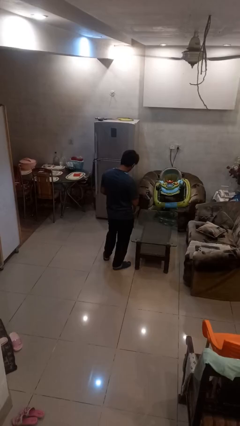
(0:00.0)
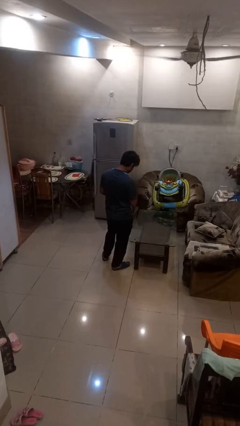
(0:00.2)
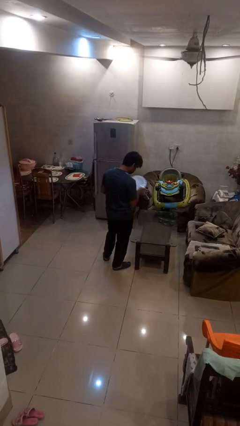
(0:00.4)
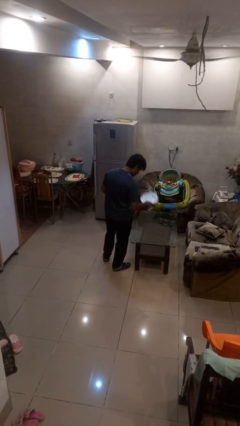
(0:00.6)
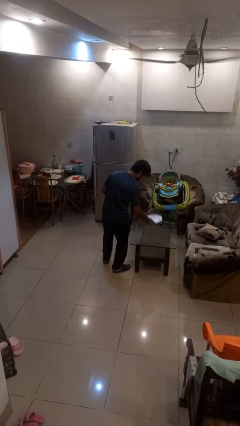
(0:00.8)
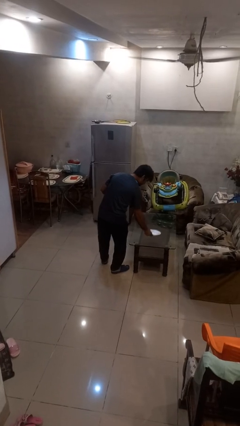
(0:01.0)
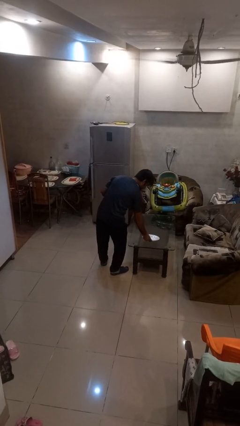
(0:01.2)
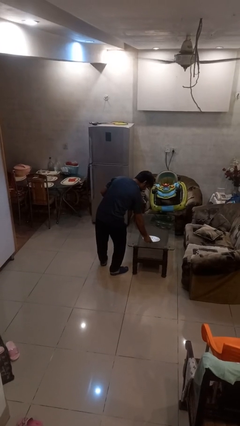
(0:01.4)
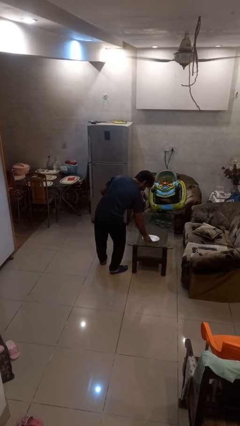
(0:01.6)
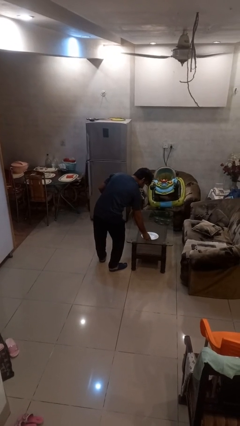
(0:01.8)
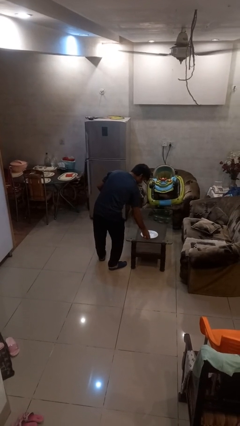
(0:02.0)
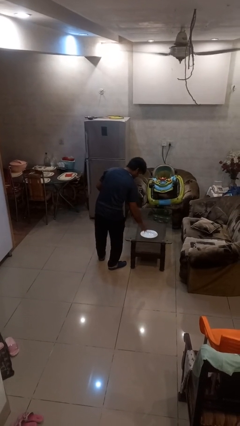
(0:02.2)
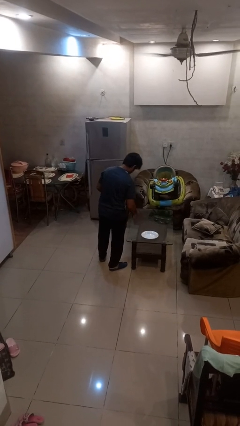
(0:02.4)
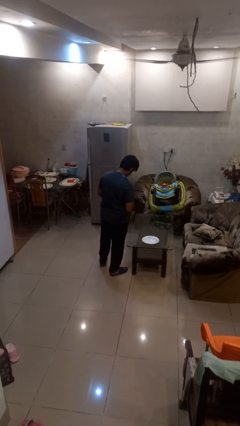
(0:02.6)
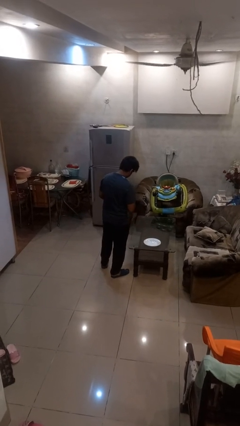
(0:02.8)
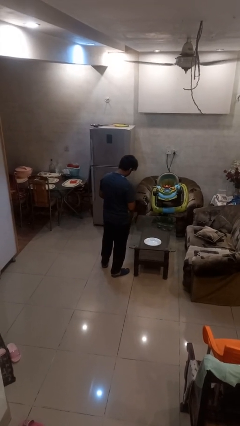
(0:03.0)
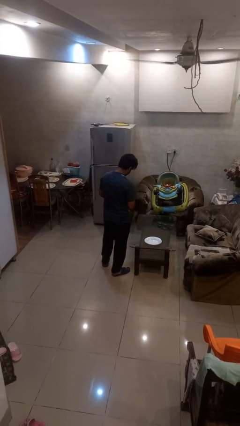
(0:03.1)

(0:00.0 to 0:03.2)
person sets table

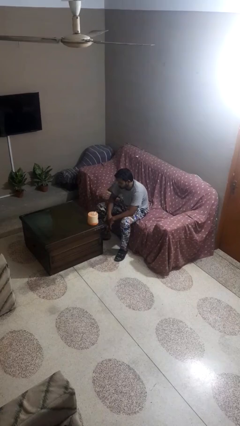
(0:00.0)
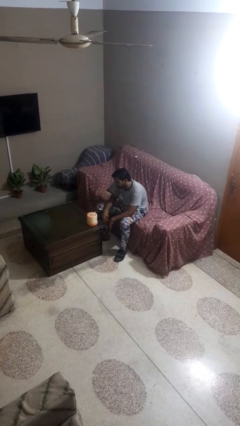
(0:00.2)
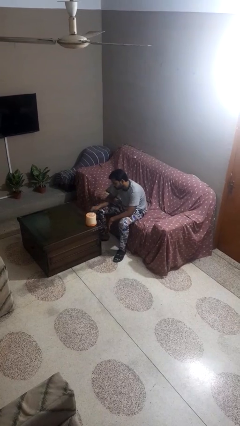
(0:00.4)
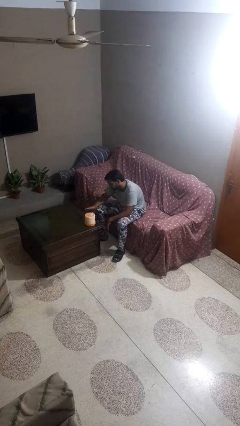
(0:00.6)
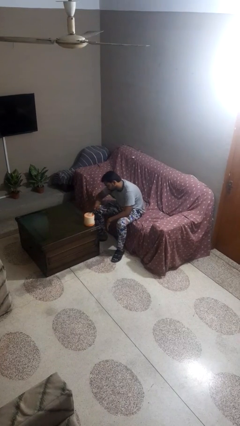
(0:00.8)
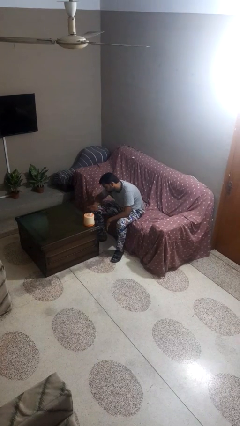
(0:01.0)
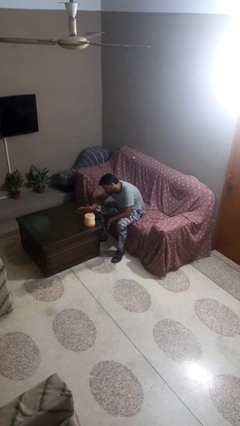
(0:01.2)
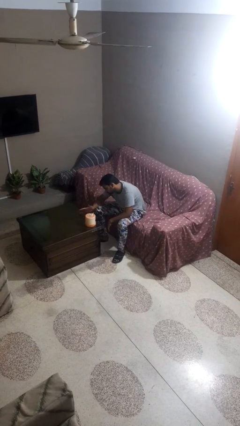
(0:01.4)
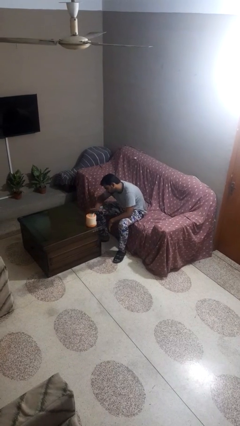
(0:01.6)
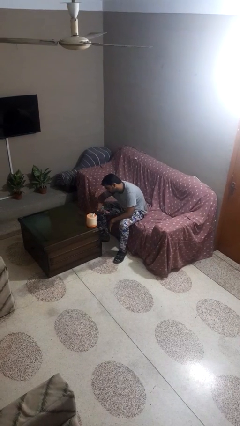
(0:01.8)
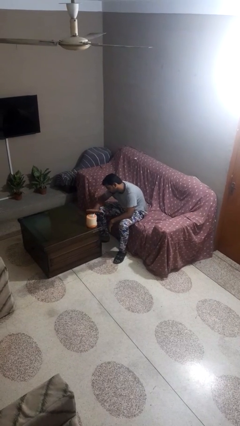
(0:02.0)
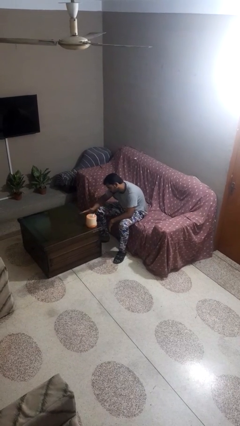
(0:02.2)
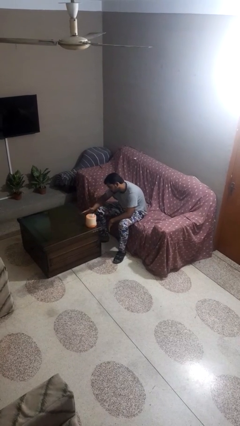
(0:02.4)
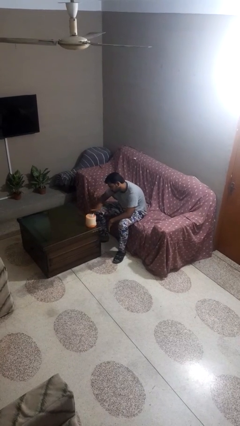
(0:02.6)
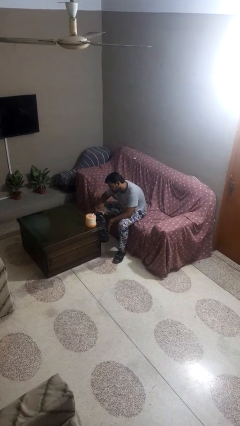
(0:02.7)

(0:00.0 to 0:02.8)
person waves hand over object

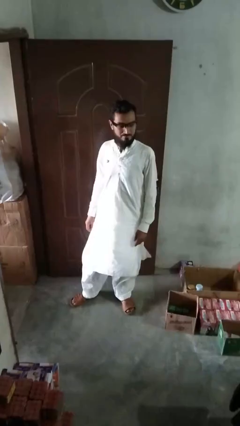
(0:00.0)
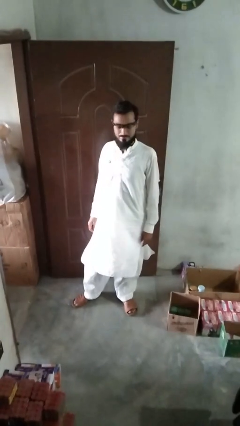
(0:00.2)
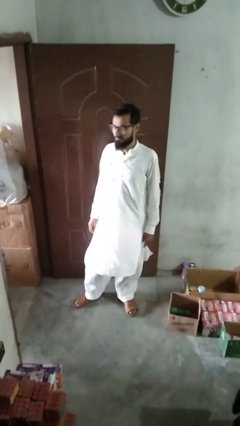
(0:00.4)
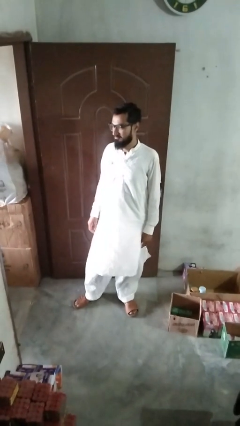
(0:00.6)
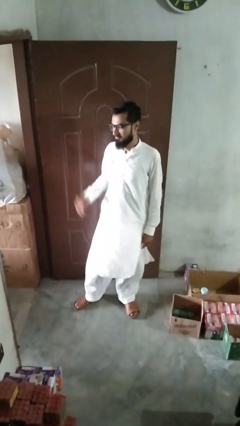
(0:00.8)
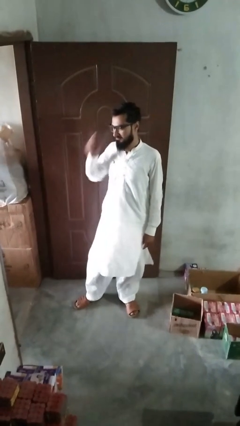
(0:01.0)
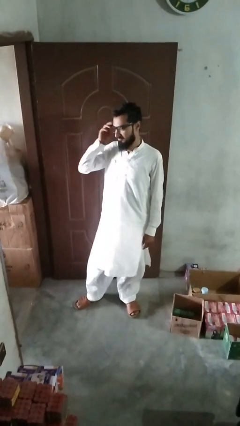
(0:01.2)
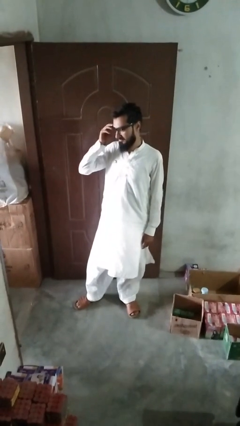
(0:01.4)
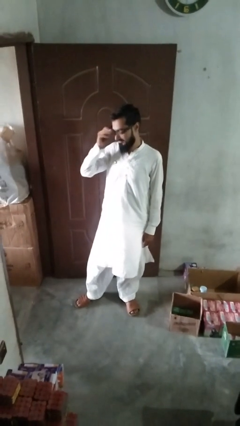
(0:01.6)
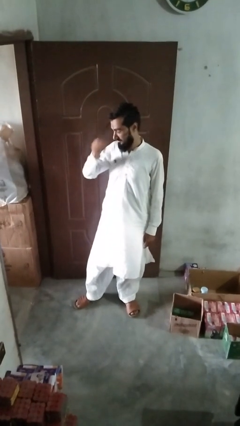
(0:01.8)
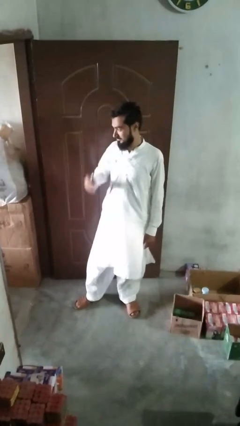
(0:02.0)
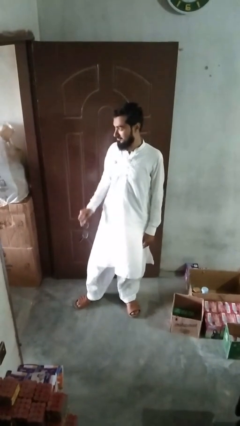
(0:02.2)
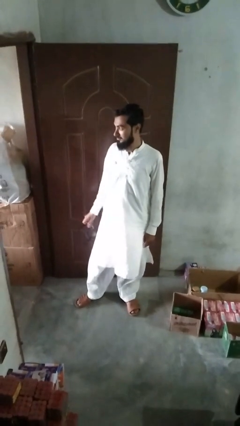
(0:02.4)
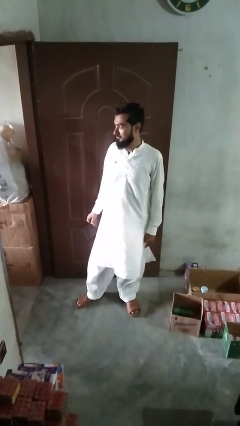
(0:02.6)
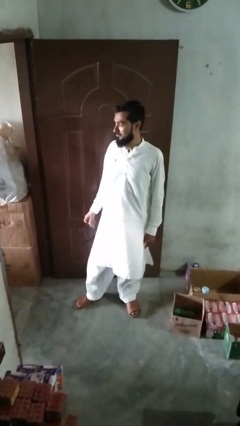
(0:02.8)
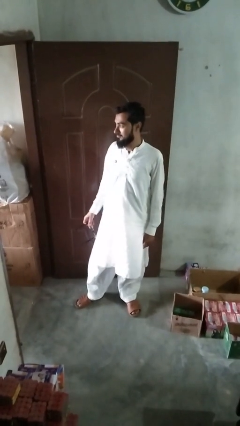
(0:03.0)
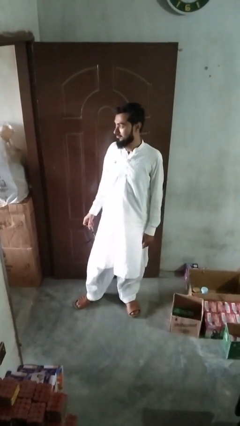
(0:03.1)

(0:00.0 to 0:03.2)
person takes off glasses

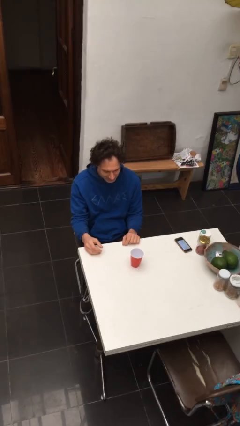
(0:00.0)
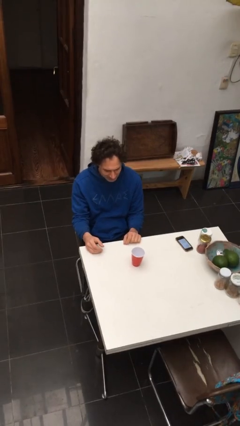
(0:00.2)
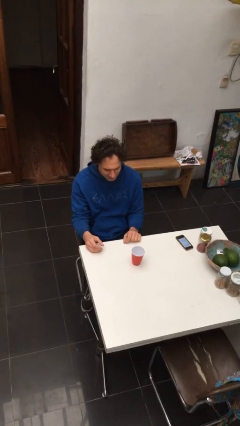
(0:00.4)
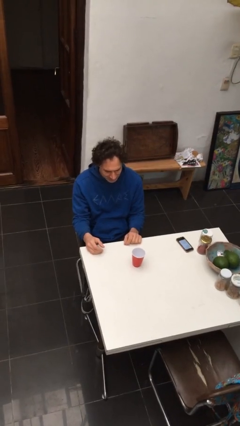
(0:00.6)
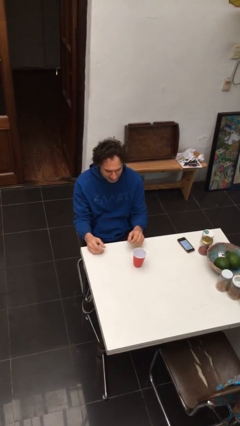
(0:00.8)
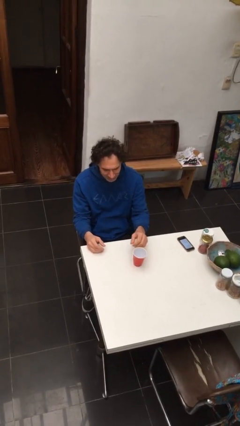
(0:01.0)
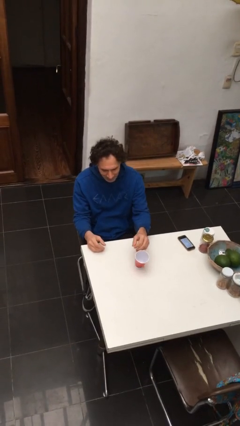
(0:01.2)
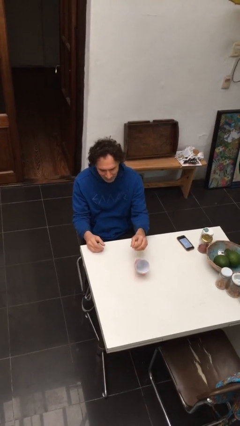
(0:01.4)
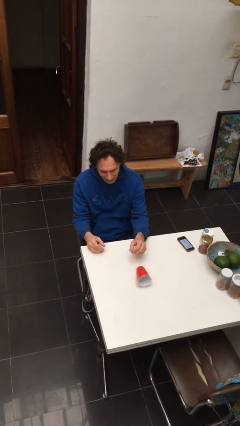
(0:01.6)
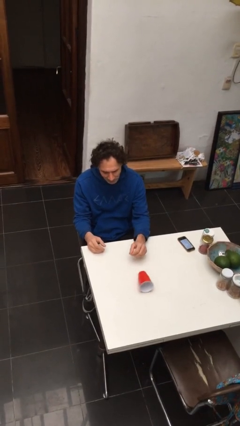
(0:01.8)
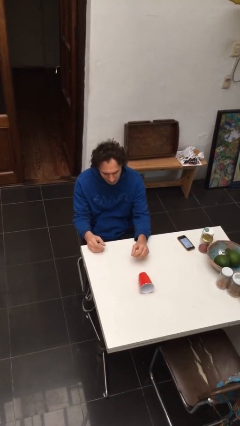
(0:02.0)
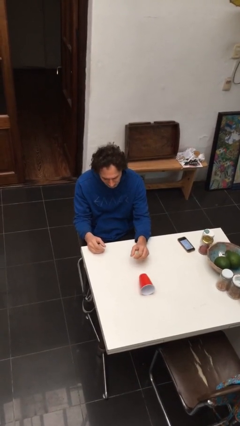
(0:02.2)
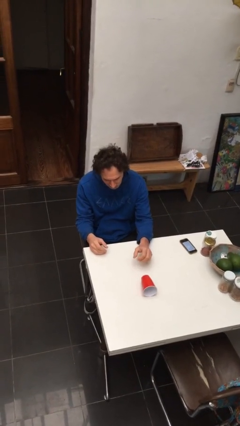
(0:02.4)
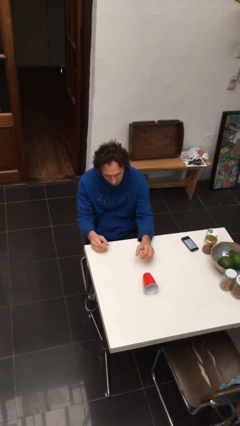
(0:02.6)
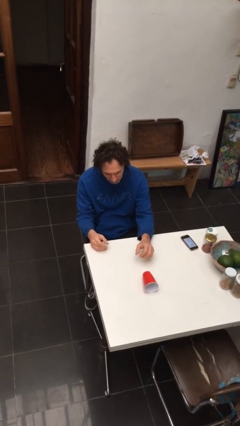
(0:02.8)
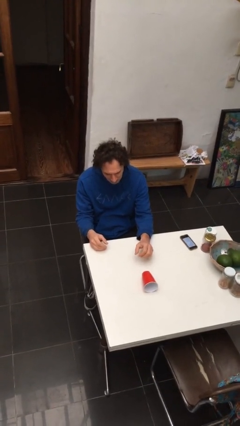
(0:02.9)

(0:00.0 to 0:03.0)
person knocks over glass

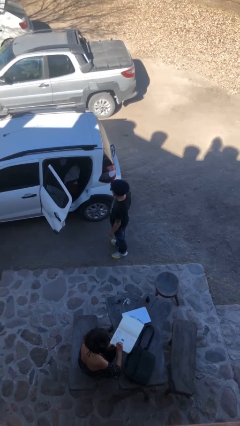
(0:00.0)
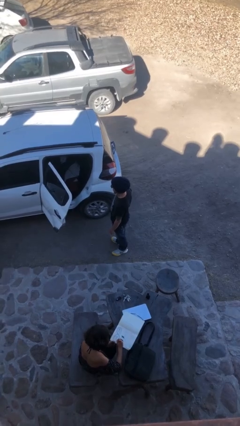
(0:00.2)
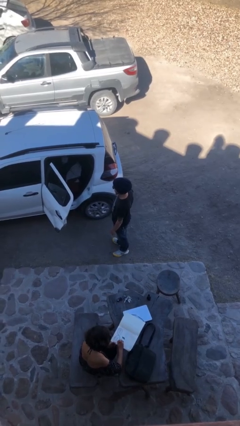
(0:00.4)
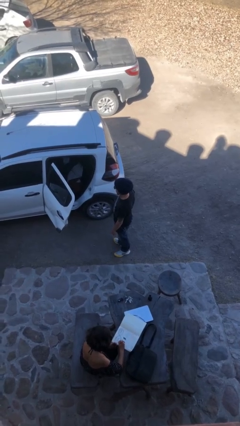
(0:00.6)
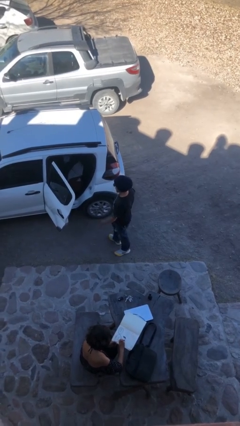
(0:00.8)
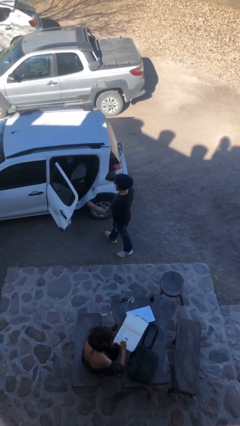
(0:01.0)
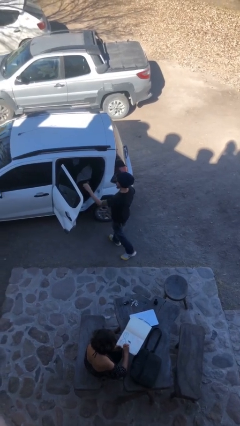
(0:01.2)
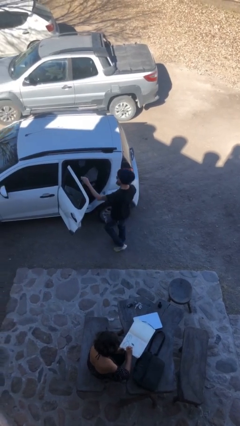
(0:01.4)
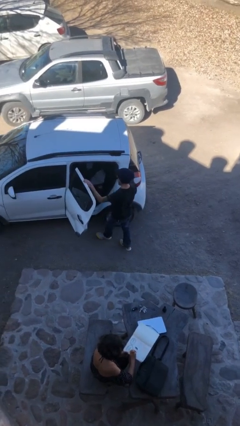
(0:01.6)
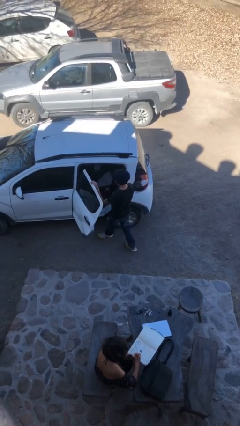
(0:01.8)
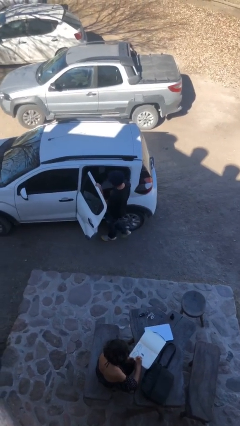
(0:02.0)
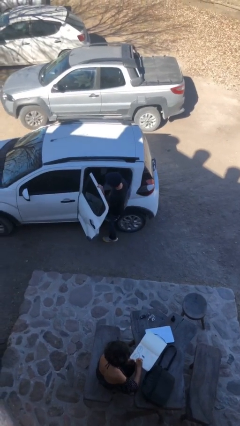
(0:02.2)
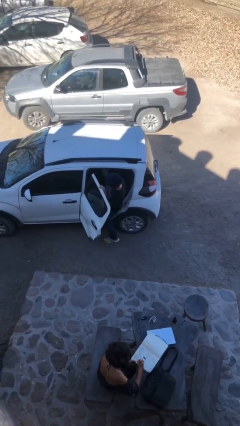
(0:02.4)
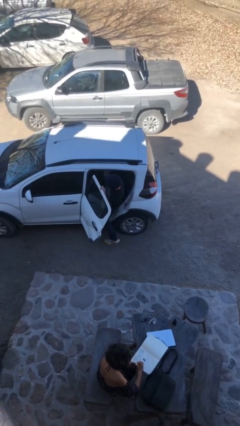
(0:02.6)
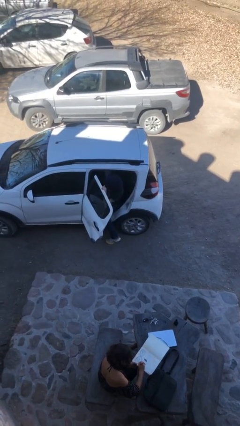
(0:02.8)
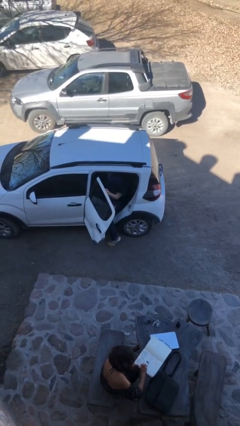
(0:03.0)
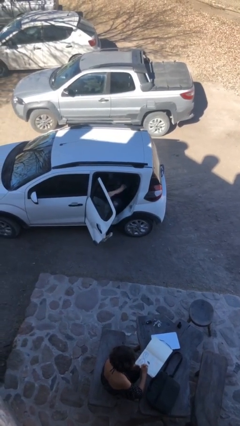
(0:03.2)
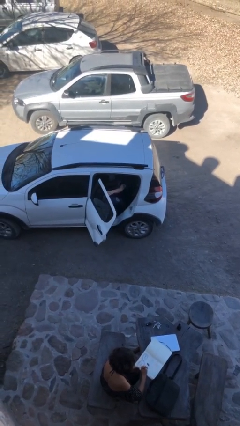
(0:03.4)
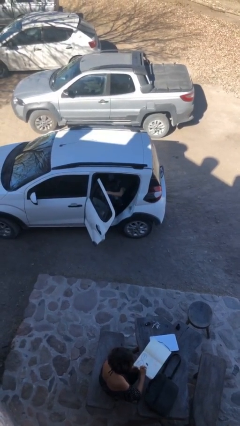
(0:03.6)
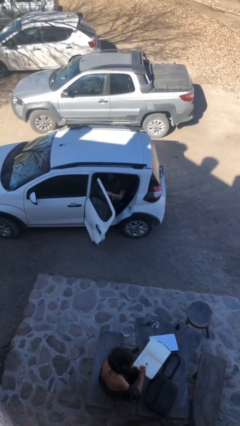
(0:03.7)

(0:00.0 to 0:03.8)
person enters car

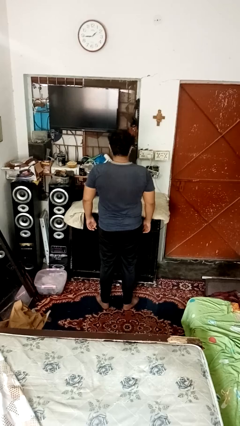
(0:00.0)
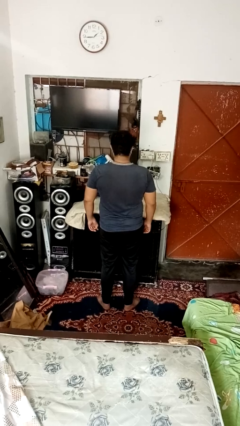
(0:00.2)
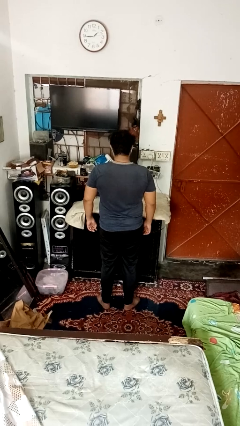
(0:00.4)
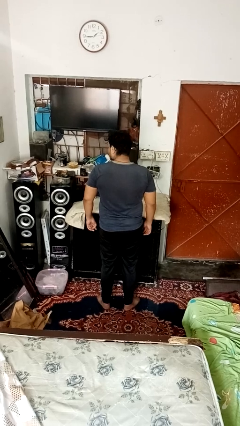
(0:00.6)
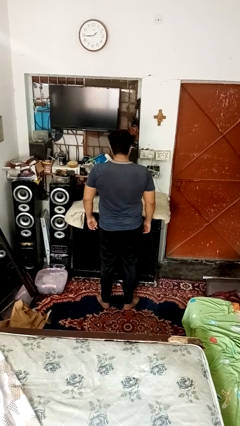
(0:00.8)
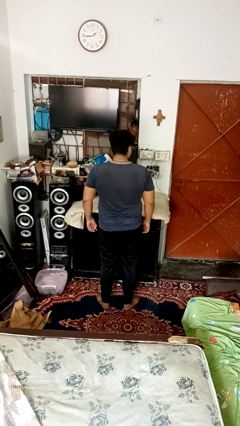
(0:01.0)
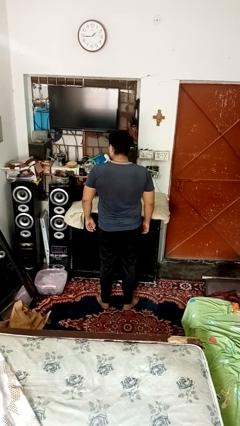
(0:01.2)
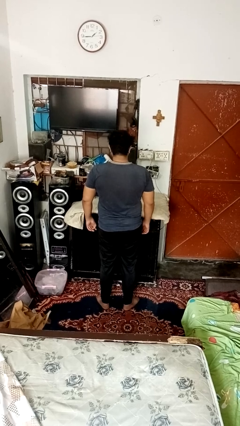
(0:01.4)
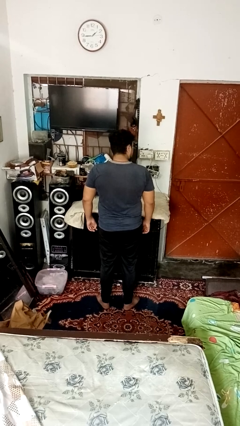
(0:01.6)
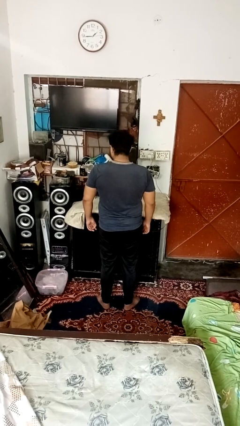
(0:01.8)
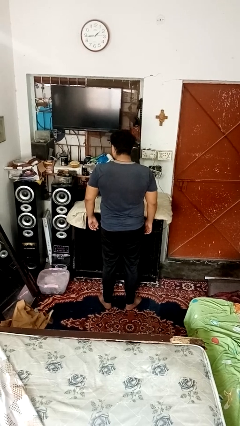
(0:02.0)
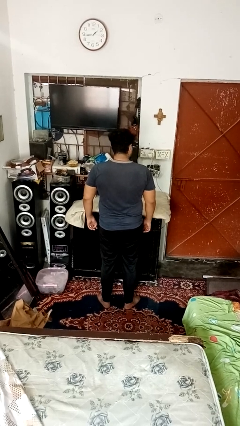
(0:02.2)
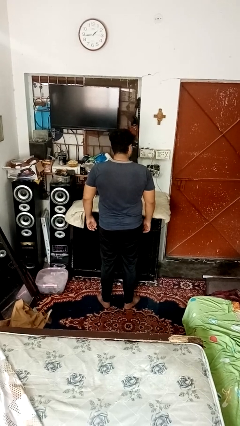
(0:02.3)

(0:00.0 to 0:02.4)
person shakes head
